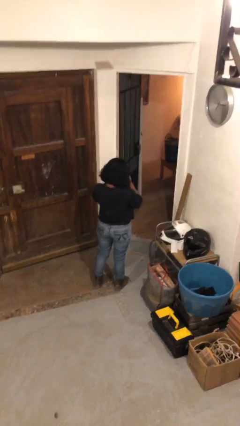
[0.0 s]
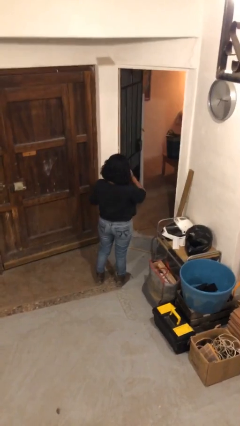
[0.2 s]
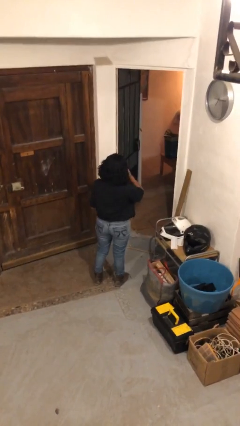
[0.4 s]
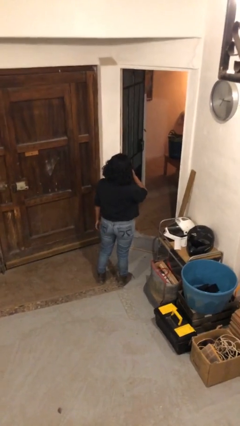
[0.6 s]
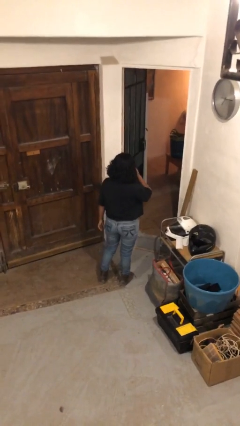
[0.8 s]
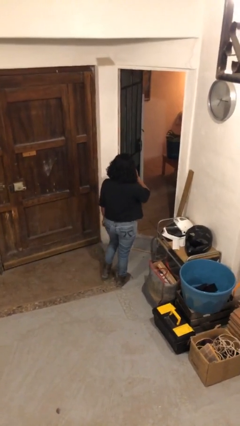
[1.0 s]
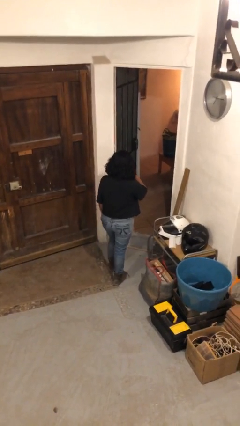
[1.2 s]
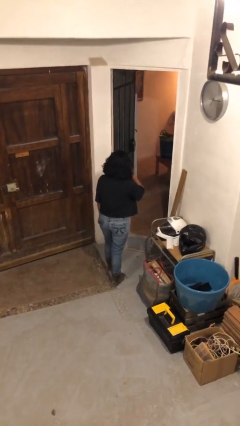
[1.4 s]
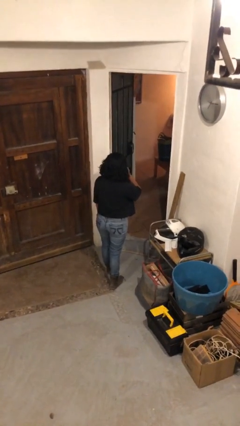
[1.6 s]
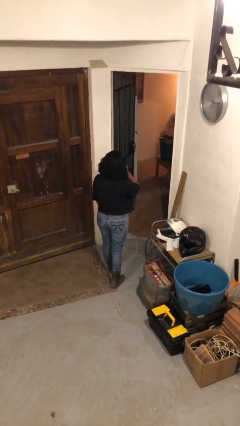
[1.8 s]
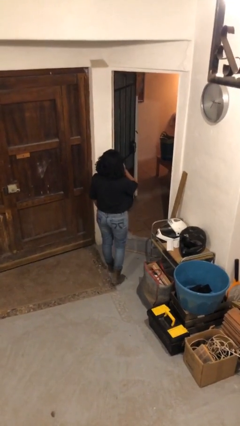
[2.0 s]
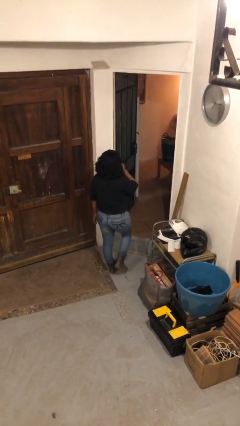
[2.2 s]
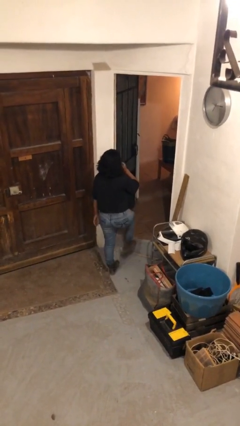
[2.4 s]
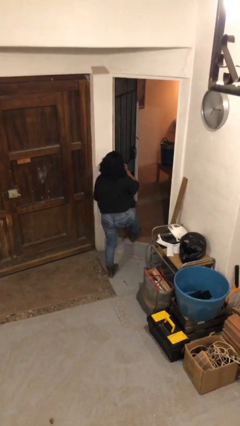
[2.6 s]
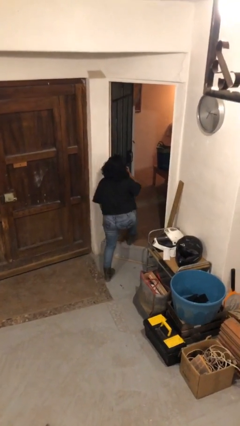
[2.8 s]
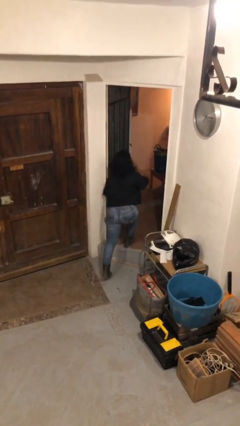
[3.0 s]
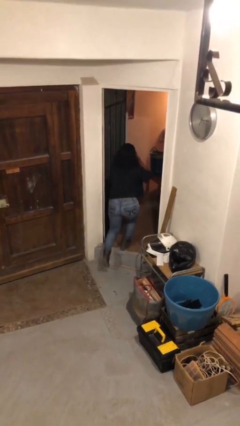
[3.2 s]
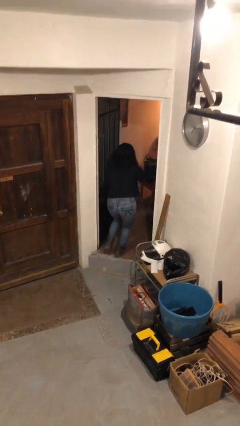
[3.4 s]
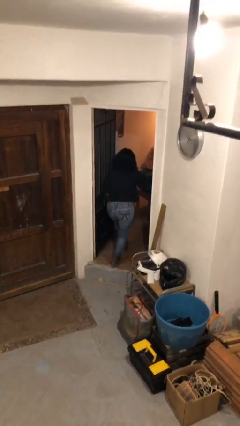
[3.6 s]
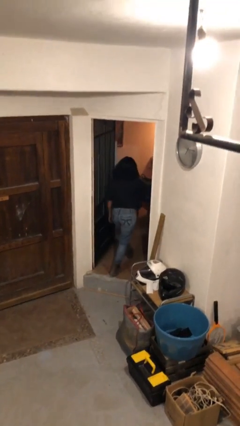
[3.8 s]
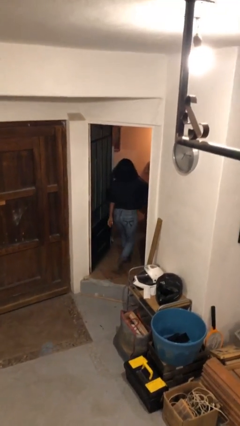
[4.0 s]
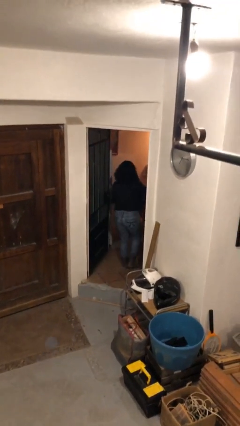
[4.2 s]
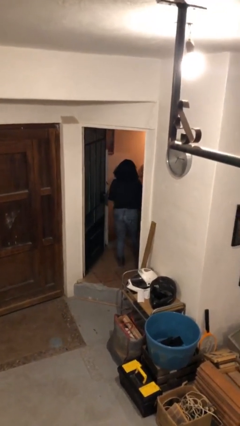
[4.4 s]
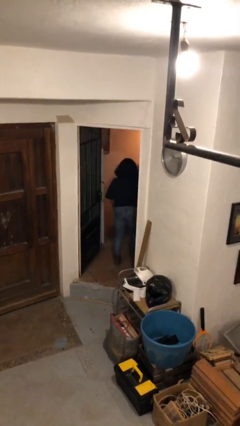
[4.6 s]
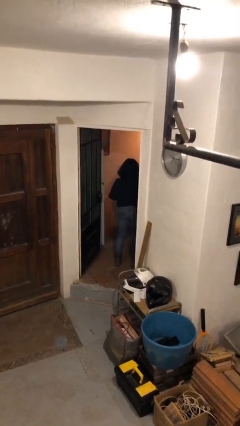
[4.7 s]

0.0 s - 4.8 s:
person exits scene through structure

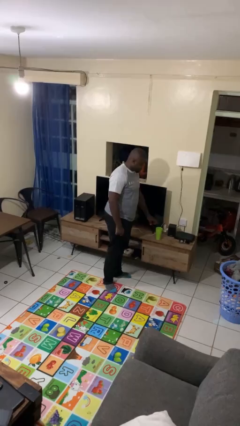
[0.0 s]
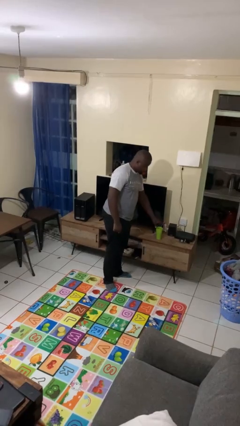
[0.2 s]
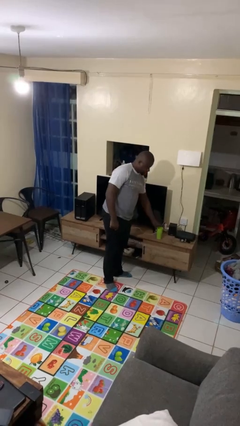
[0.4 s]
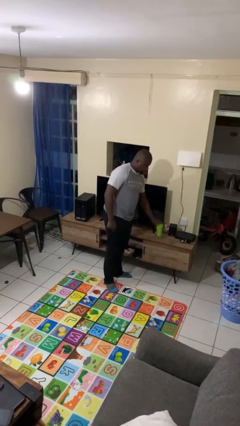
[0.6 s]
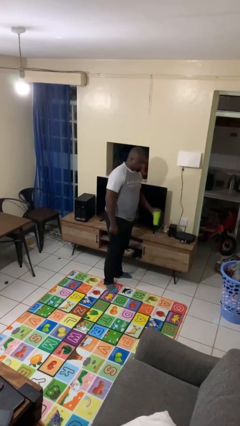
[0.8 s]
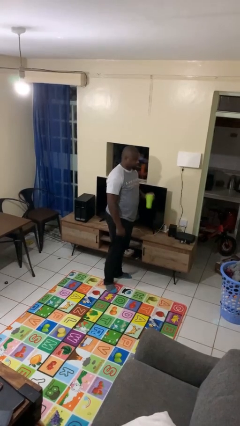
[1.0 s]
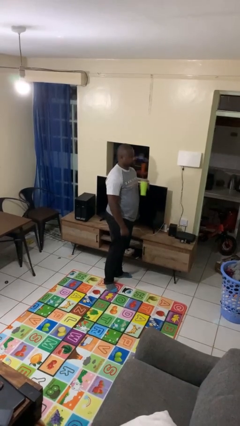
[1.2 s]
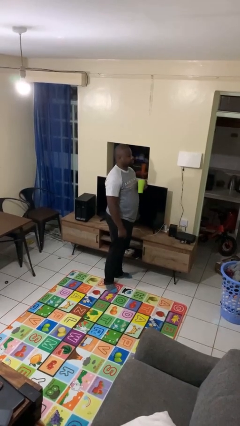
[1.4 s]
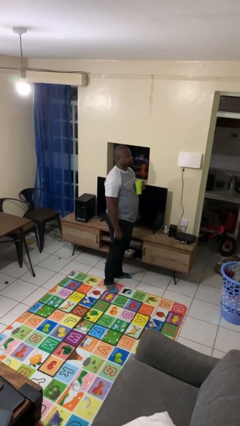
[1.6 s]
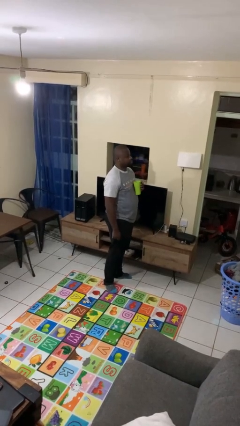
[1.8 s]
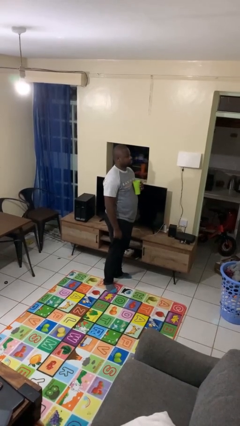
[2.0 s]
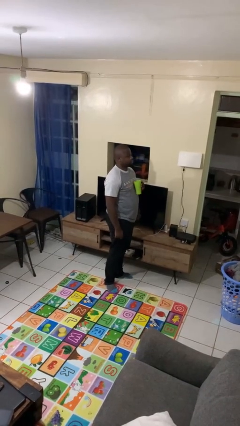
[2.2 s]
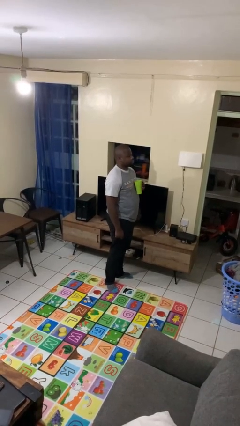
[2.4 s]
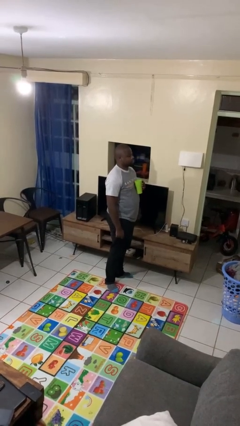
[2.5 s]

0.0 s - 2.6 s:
person picks up object from countertop

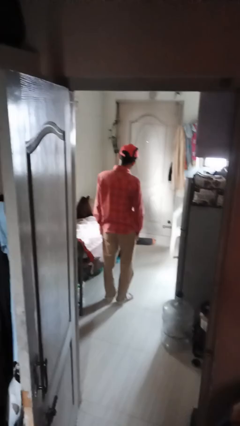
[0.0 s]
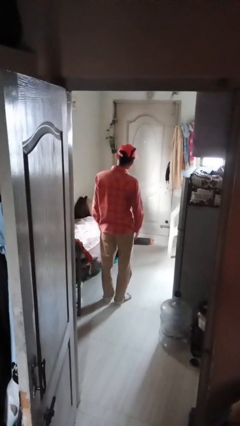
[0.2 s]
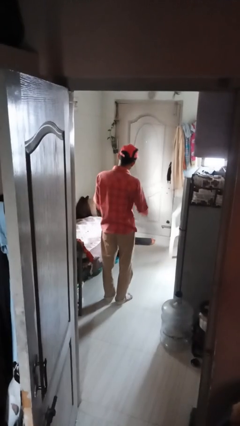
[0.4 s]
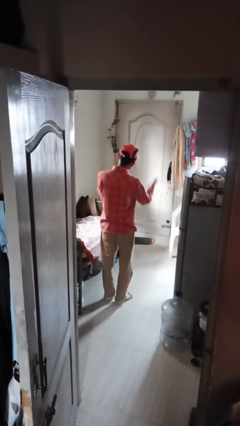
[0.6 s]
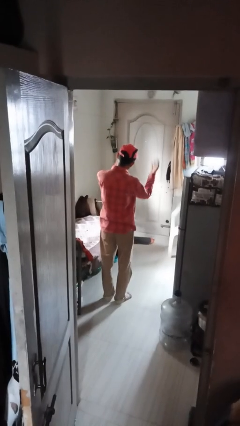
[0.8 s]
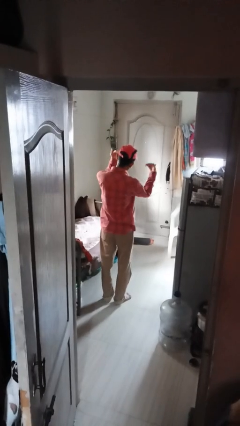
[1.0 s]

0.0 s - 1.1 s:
person gestures come here

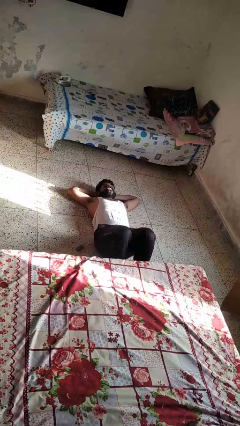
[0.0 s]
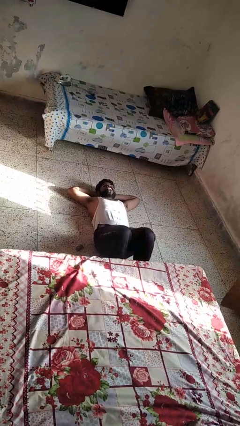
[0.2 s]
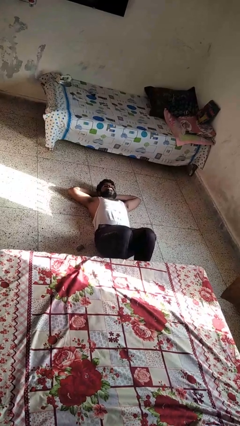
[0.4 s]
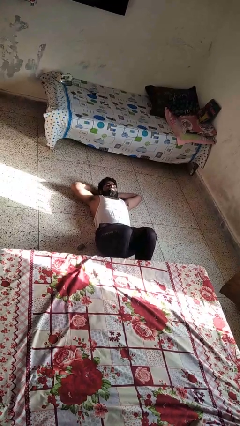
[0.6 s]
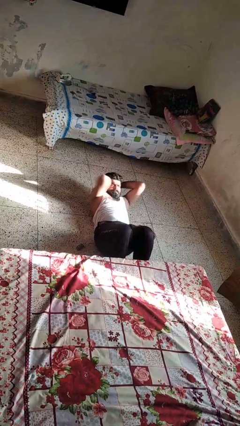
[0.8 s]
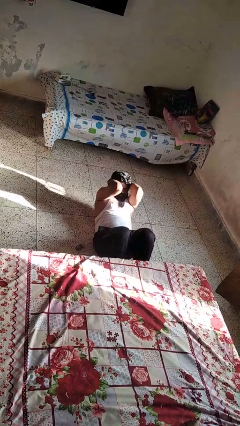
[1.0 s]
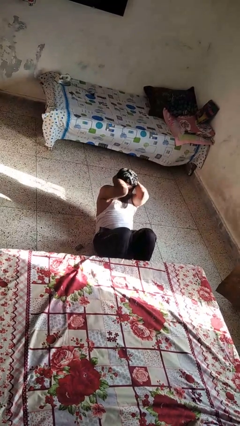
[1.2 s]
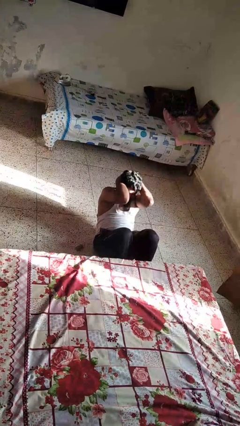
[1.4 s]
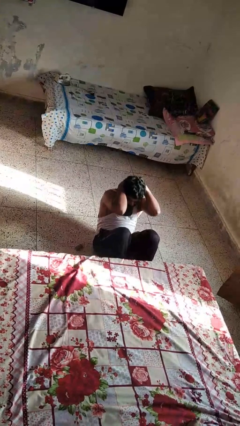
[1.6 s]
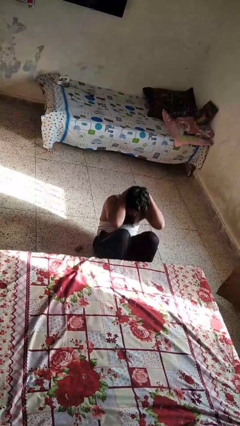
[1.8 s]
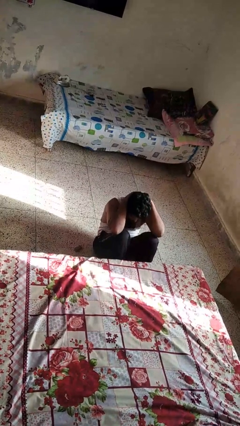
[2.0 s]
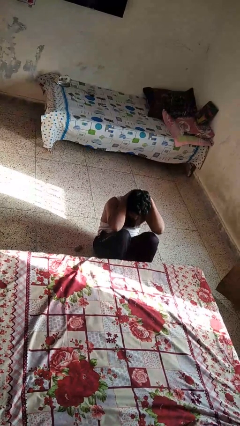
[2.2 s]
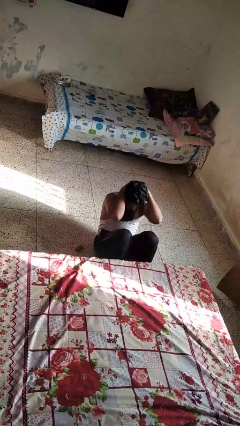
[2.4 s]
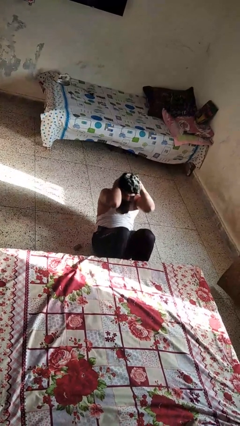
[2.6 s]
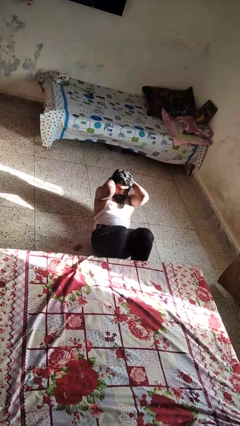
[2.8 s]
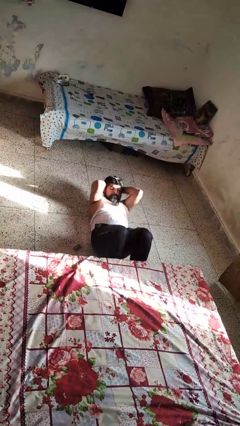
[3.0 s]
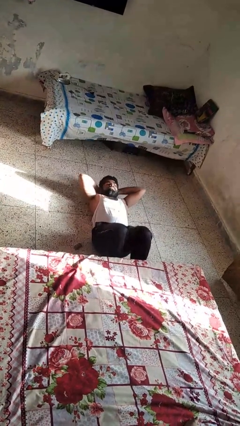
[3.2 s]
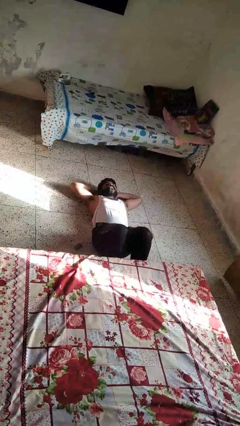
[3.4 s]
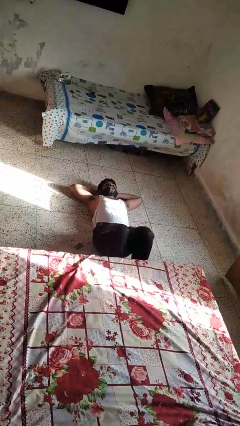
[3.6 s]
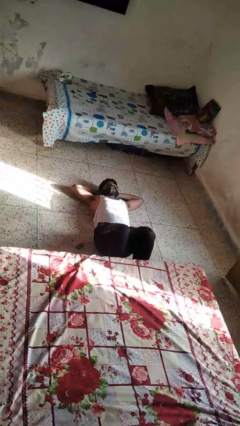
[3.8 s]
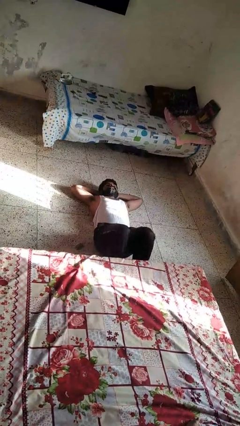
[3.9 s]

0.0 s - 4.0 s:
person exercises with situp

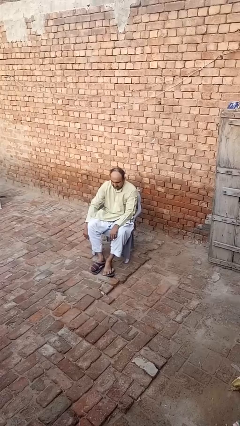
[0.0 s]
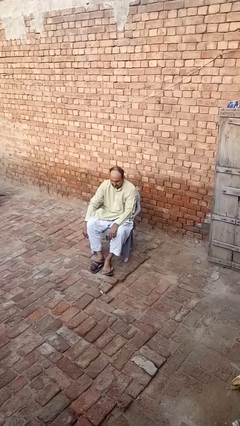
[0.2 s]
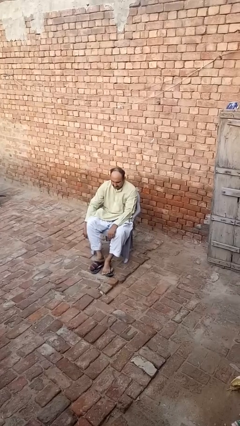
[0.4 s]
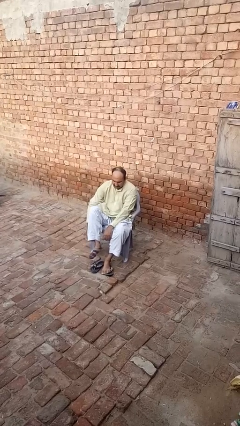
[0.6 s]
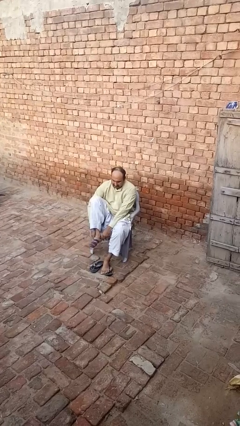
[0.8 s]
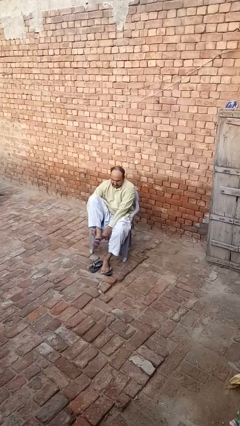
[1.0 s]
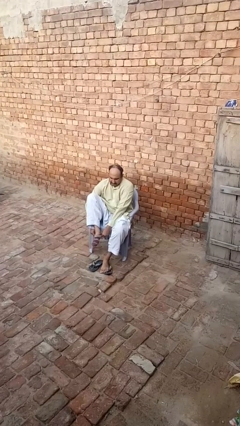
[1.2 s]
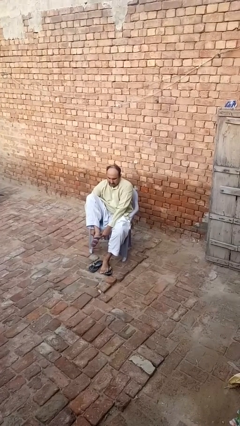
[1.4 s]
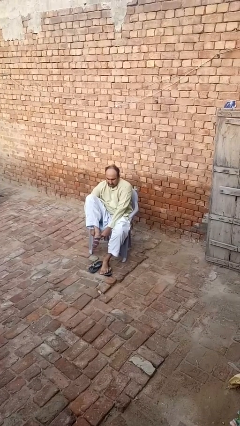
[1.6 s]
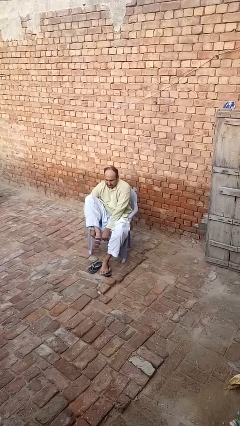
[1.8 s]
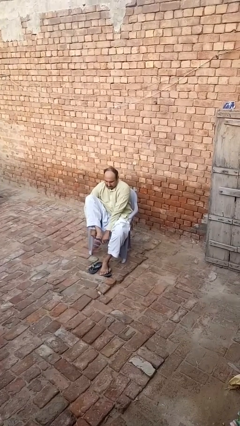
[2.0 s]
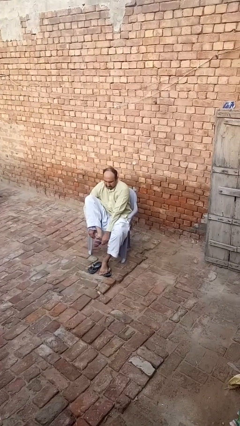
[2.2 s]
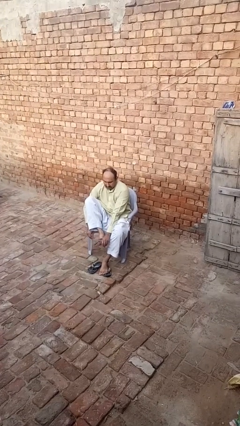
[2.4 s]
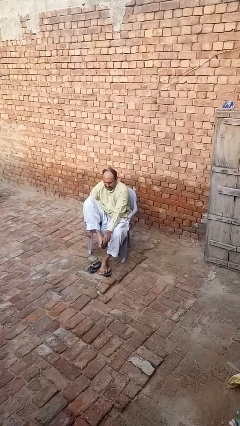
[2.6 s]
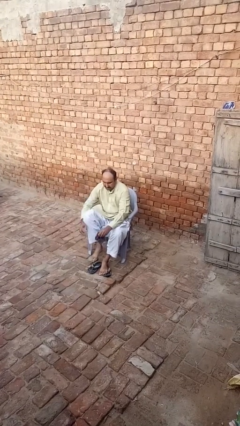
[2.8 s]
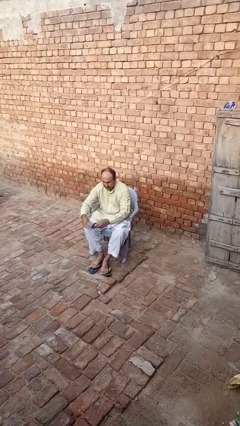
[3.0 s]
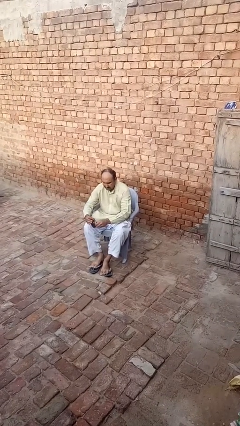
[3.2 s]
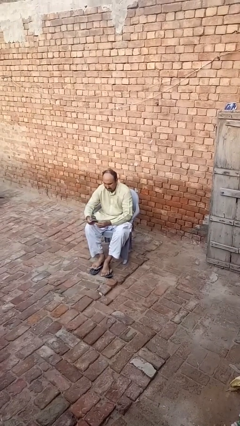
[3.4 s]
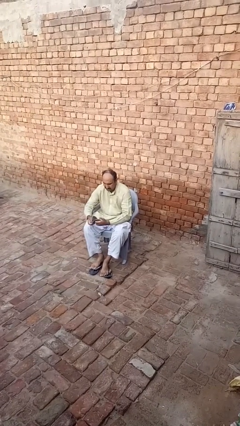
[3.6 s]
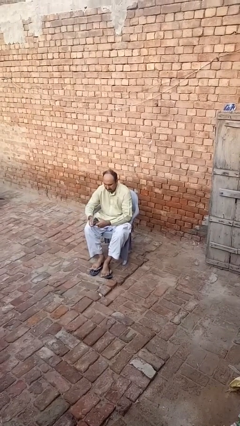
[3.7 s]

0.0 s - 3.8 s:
person takes off socks

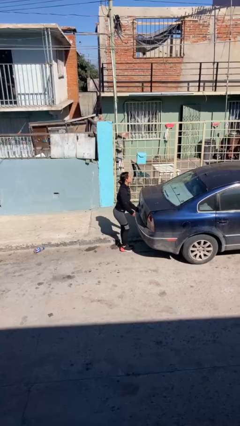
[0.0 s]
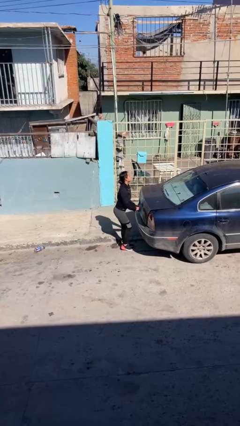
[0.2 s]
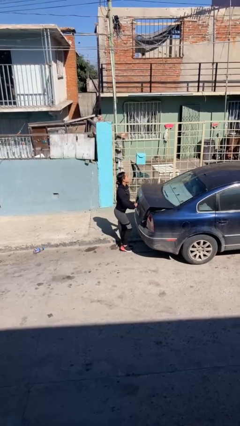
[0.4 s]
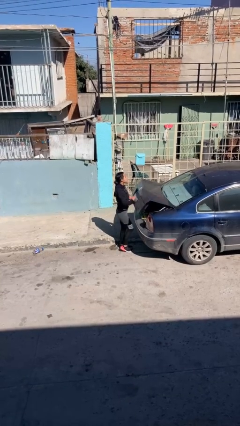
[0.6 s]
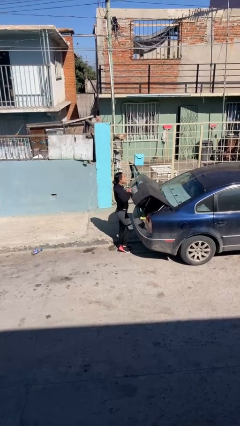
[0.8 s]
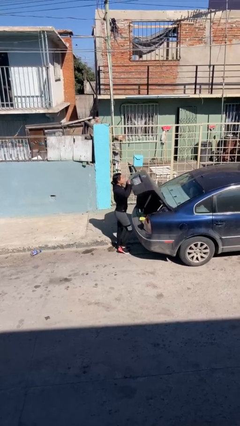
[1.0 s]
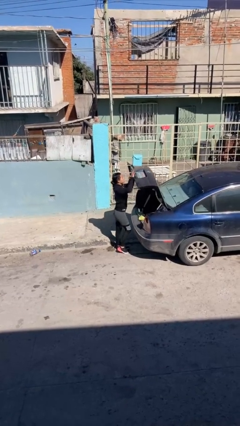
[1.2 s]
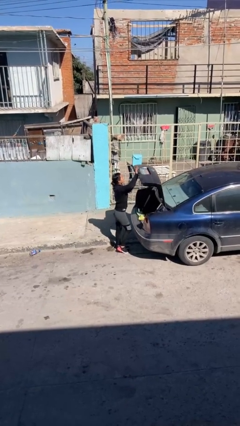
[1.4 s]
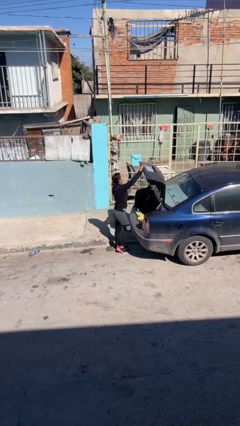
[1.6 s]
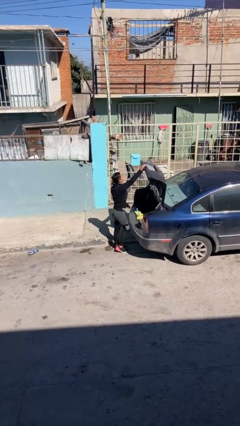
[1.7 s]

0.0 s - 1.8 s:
person opens car trunk
